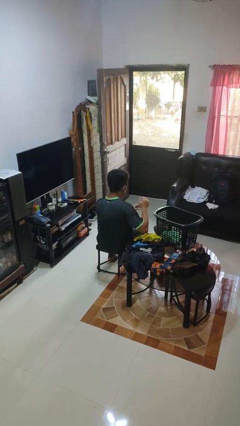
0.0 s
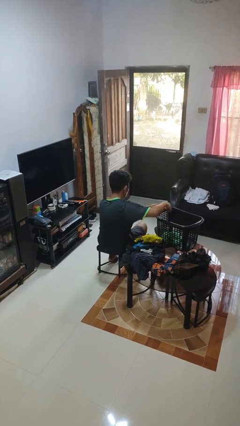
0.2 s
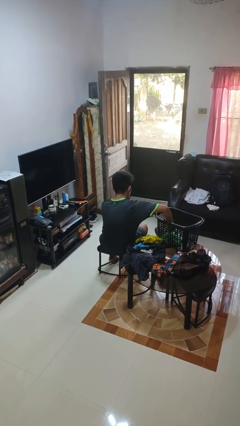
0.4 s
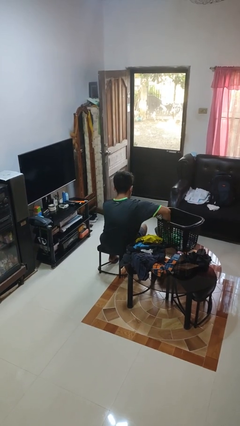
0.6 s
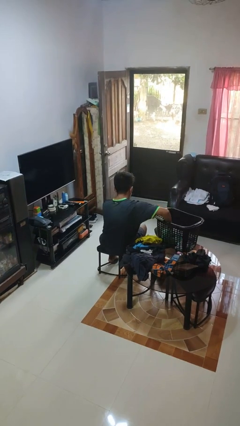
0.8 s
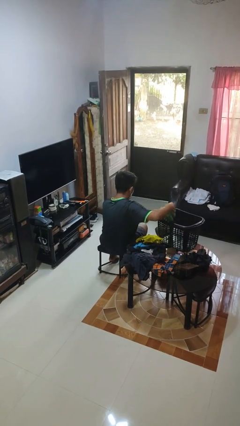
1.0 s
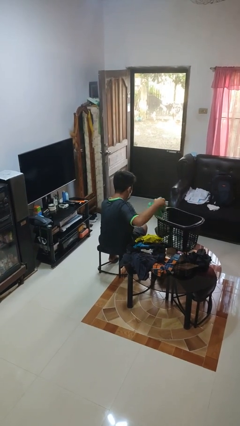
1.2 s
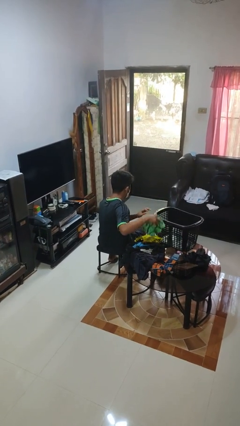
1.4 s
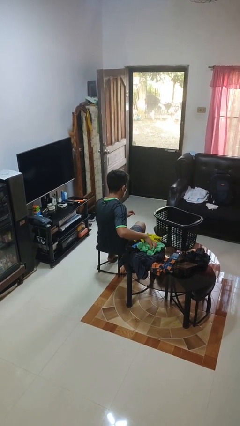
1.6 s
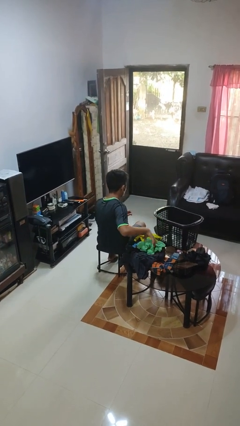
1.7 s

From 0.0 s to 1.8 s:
person takes object from basket

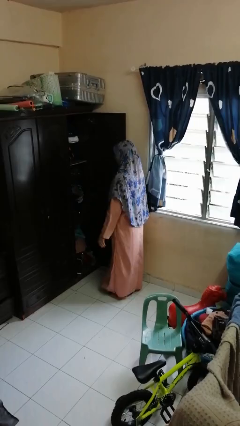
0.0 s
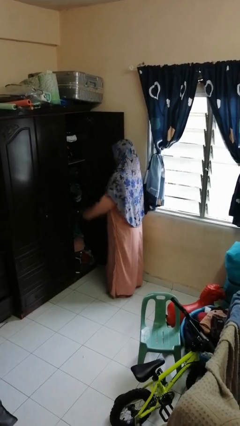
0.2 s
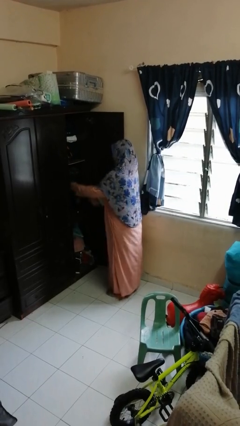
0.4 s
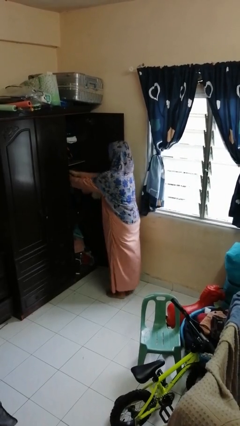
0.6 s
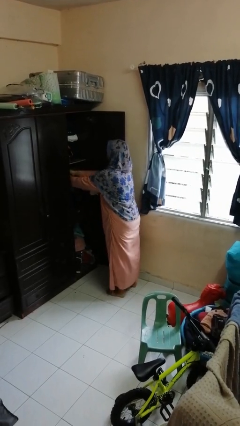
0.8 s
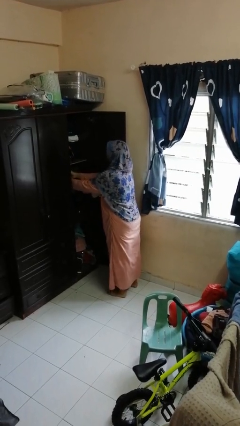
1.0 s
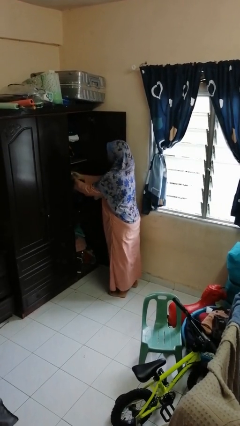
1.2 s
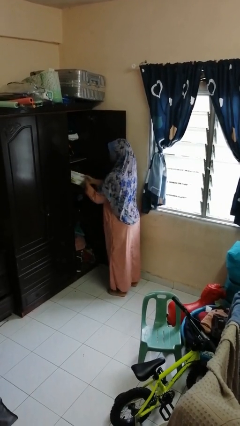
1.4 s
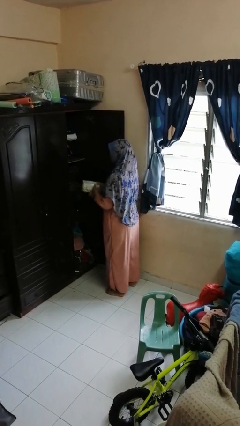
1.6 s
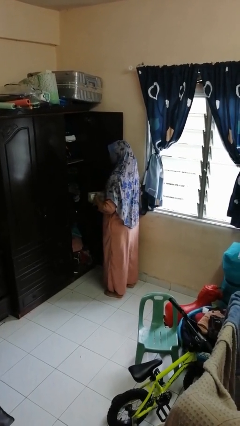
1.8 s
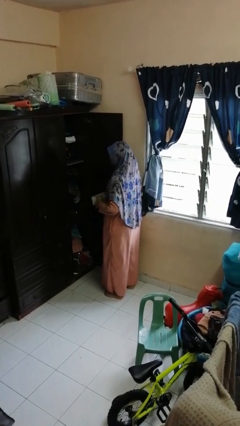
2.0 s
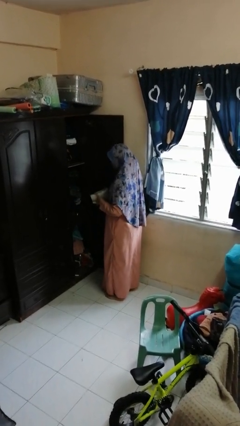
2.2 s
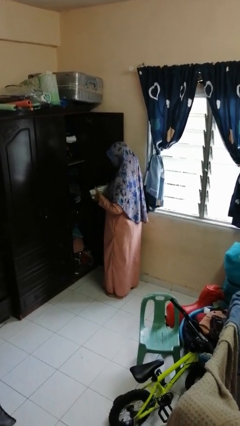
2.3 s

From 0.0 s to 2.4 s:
person picks up object from cabinet

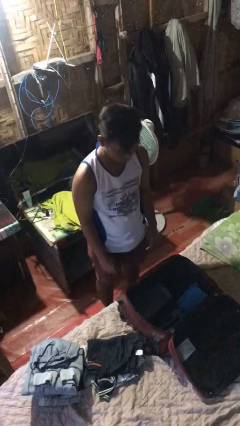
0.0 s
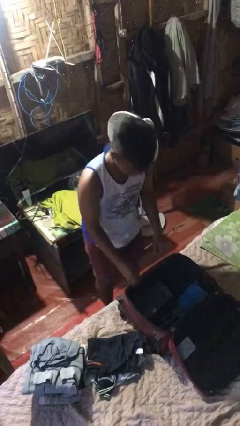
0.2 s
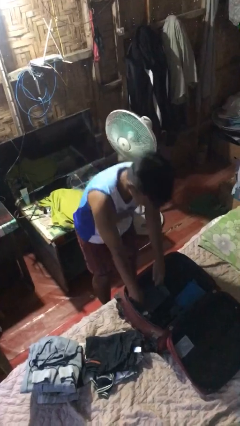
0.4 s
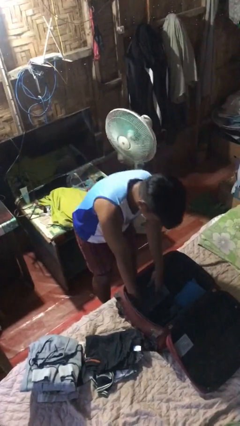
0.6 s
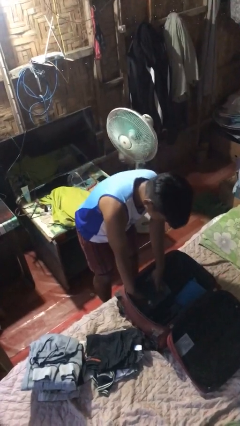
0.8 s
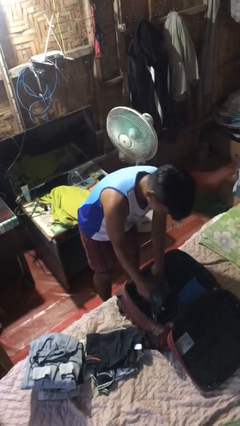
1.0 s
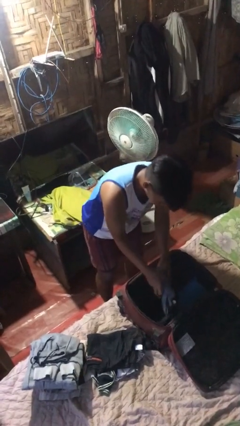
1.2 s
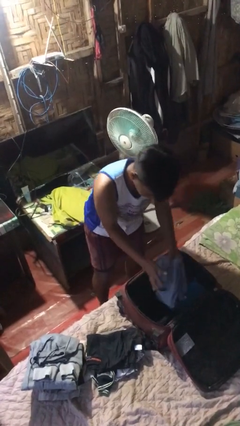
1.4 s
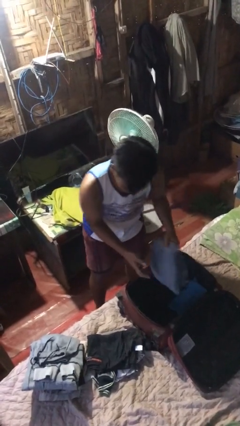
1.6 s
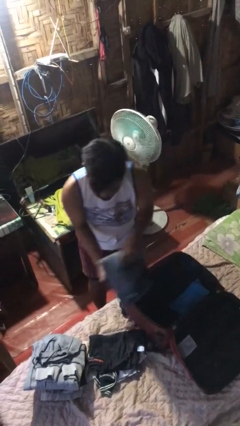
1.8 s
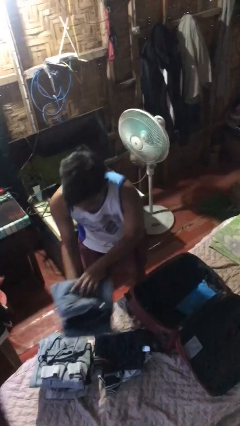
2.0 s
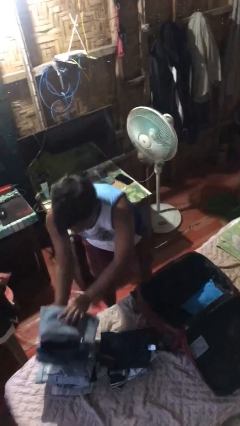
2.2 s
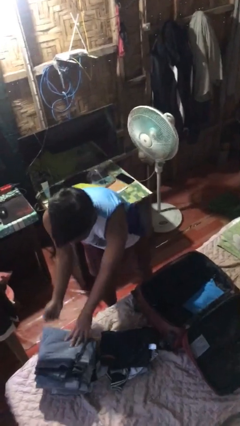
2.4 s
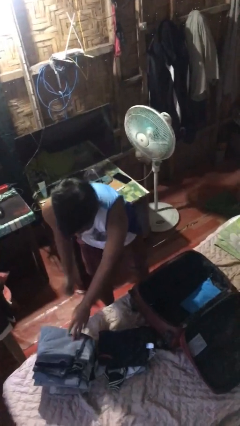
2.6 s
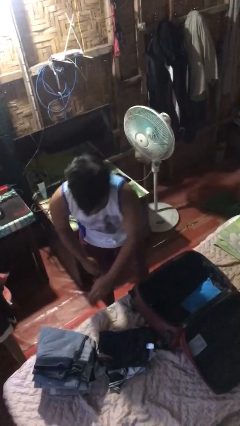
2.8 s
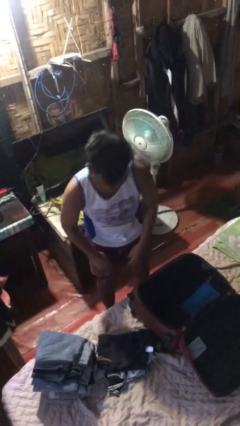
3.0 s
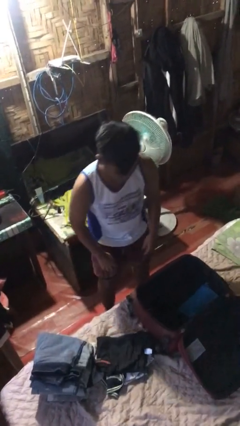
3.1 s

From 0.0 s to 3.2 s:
person unloads clothes from suitcase

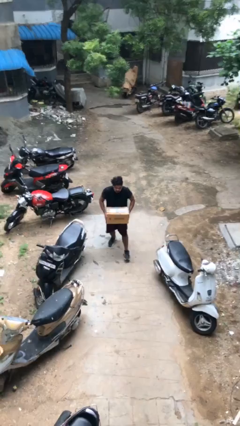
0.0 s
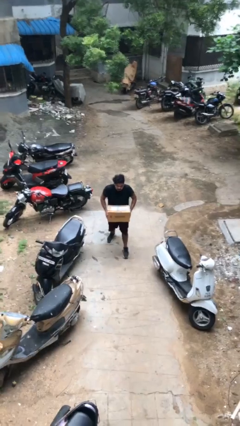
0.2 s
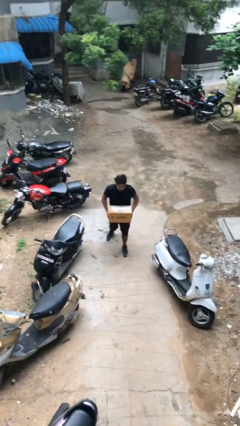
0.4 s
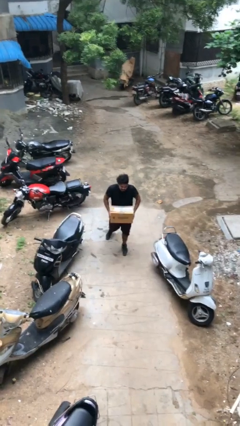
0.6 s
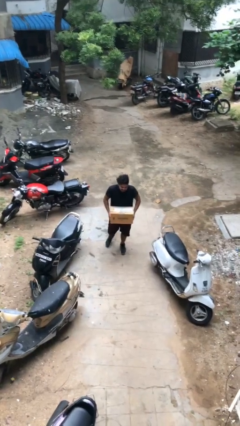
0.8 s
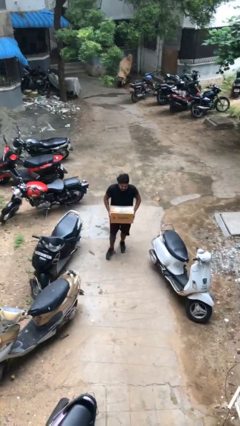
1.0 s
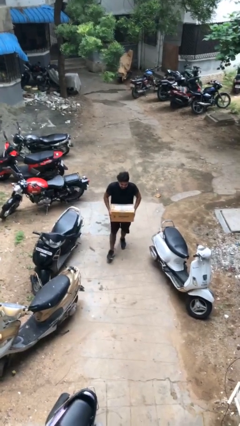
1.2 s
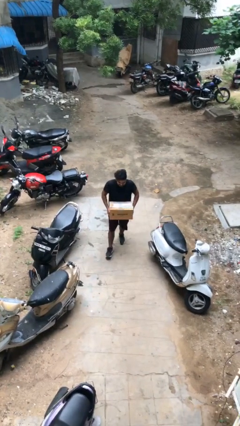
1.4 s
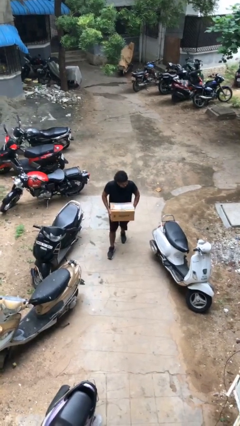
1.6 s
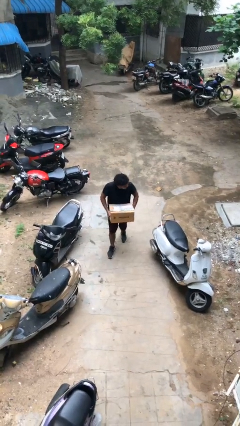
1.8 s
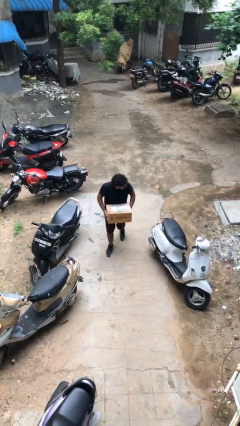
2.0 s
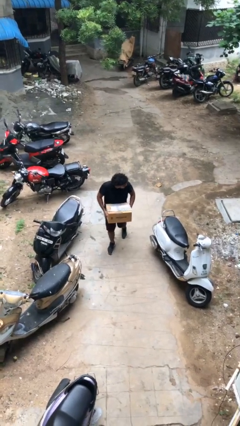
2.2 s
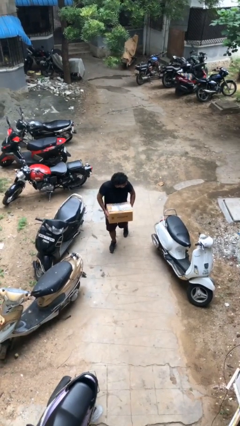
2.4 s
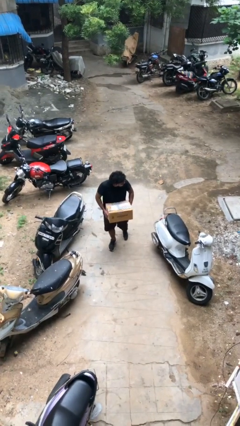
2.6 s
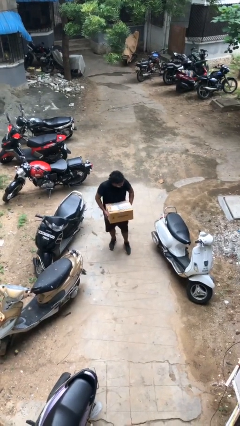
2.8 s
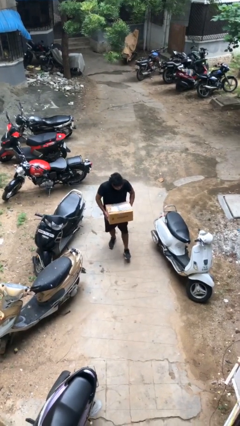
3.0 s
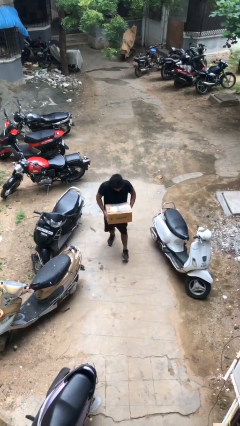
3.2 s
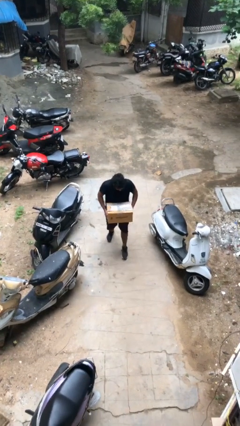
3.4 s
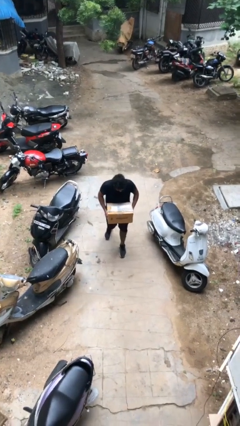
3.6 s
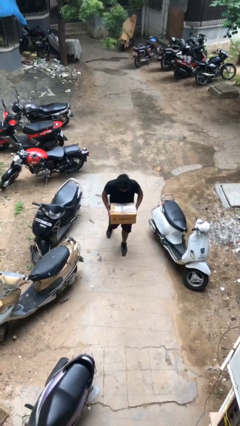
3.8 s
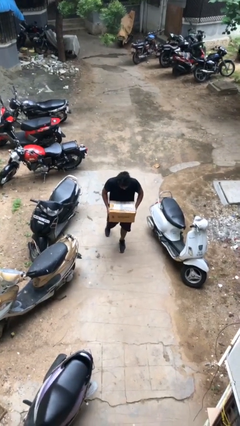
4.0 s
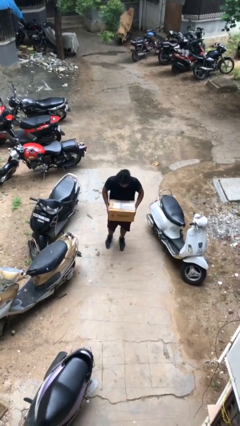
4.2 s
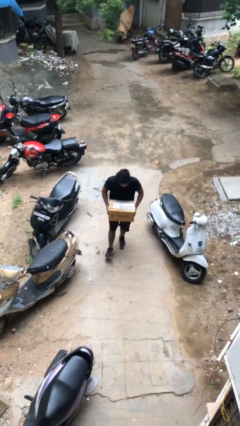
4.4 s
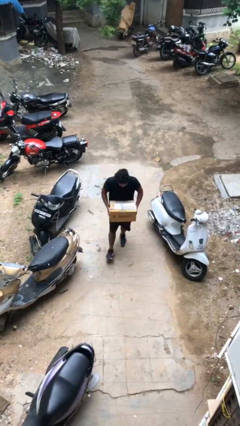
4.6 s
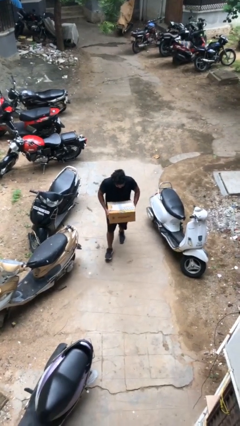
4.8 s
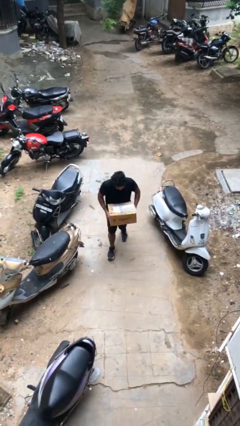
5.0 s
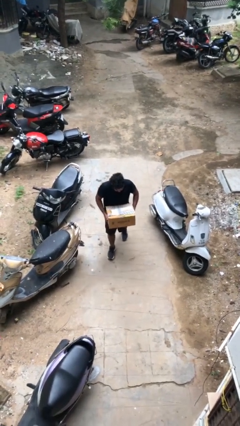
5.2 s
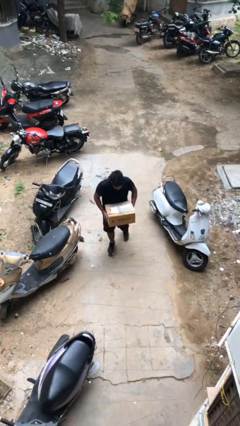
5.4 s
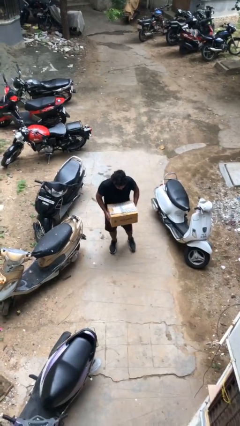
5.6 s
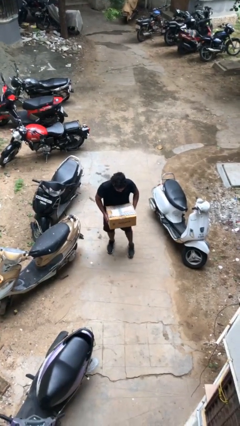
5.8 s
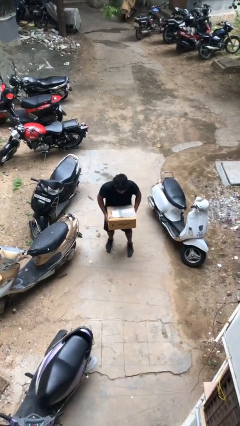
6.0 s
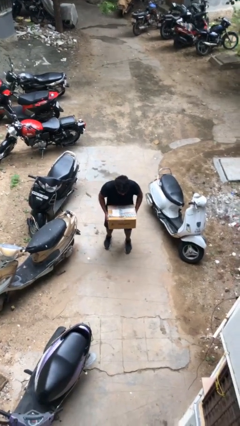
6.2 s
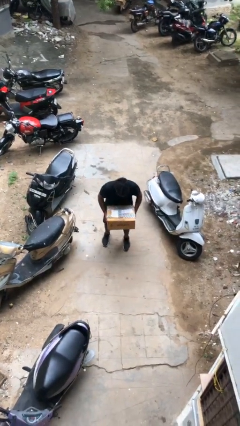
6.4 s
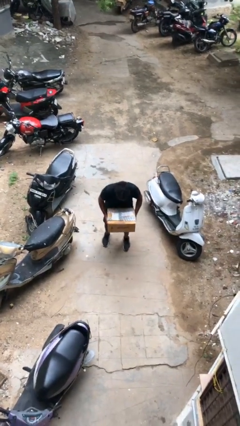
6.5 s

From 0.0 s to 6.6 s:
person carries heavy object

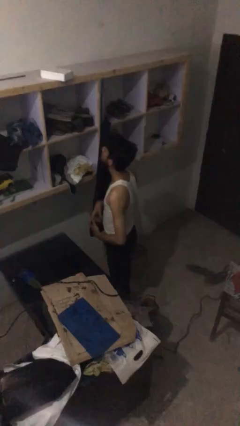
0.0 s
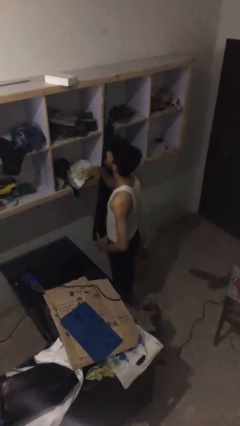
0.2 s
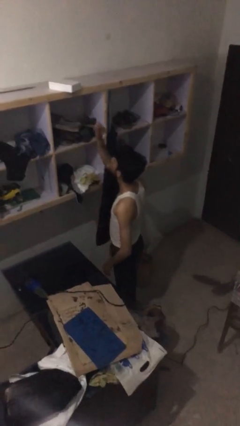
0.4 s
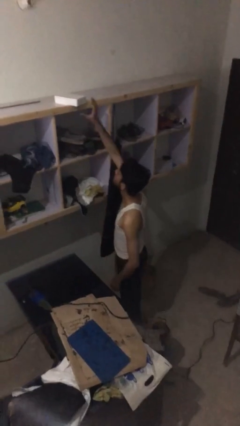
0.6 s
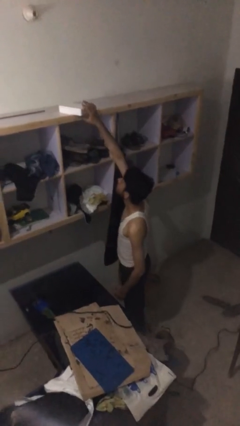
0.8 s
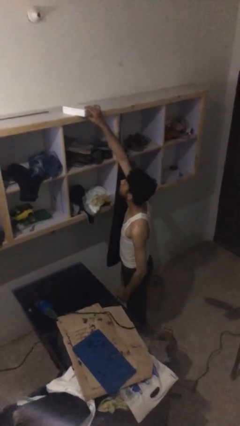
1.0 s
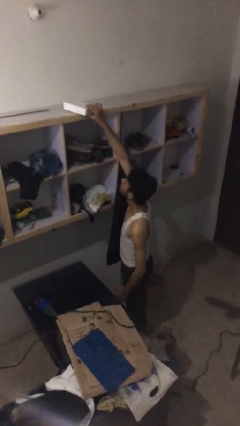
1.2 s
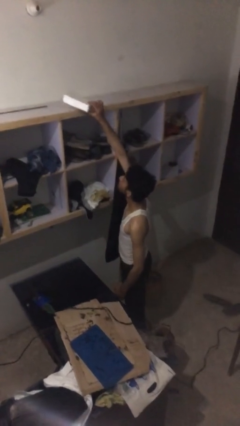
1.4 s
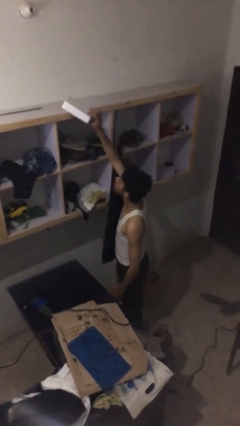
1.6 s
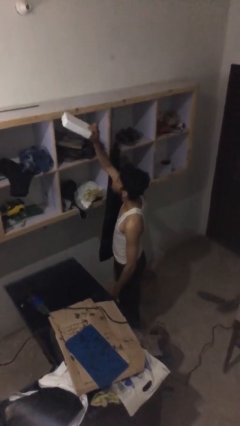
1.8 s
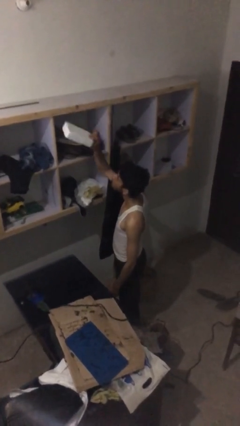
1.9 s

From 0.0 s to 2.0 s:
person picks up object from shelf

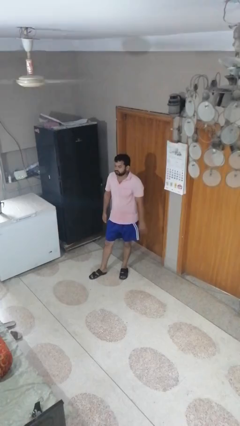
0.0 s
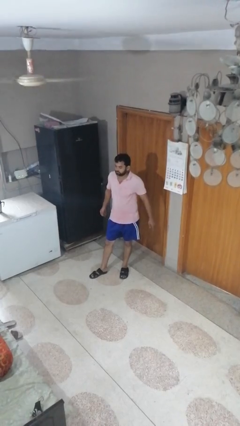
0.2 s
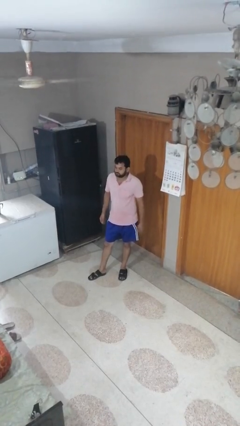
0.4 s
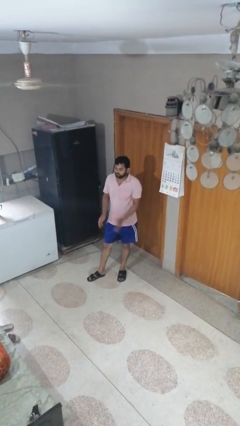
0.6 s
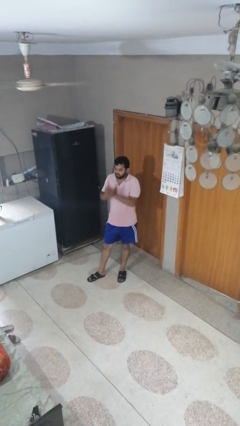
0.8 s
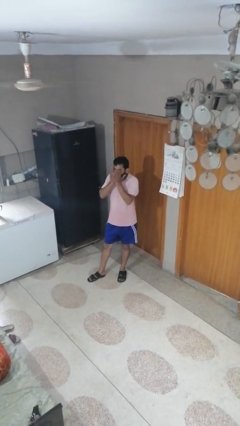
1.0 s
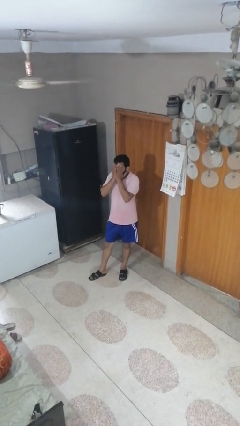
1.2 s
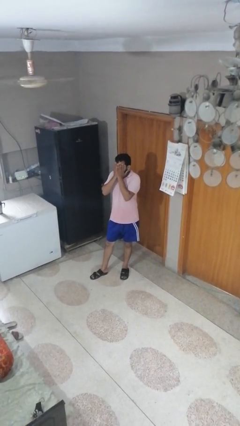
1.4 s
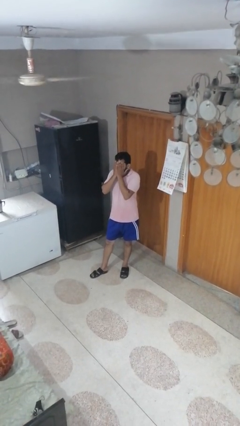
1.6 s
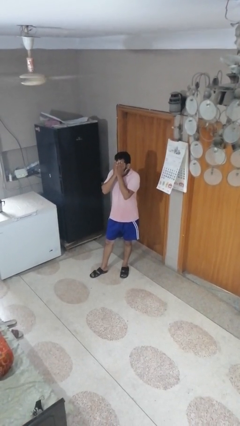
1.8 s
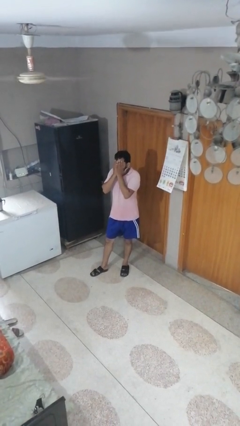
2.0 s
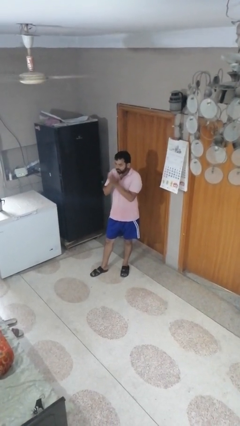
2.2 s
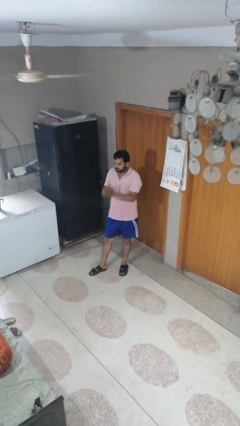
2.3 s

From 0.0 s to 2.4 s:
person covers face with hands
